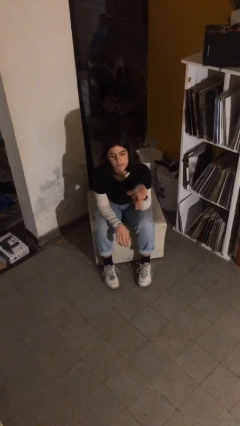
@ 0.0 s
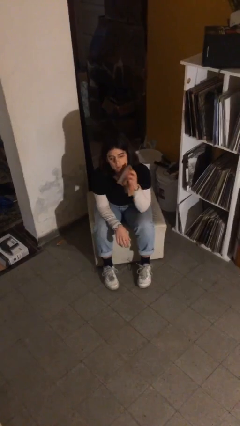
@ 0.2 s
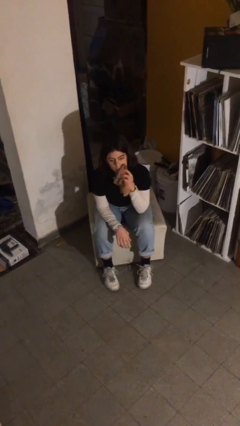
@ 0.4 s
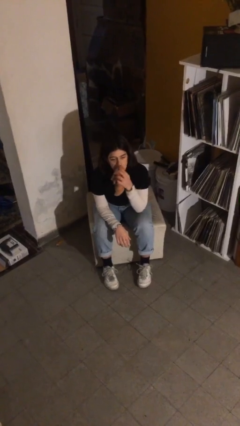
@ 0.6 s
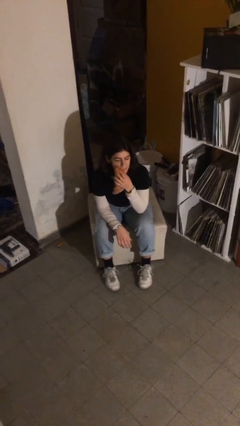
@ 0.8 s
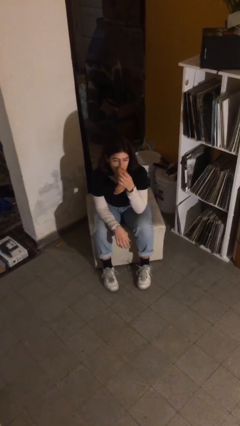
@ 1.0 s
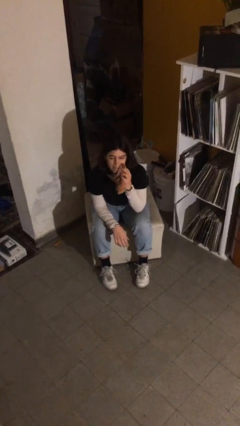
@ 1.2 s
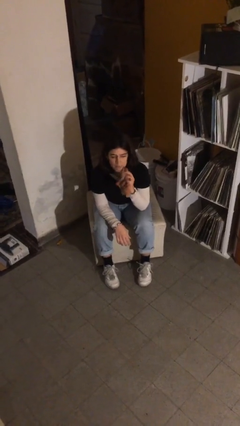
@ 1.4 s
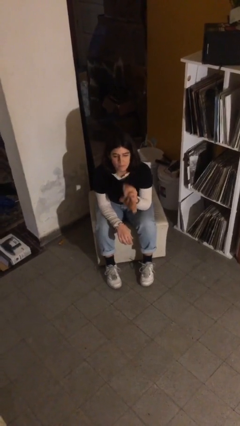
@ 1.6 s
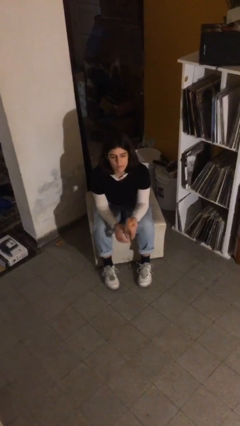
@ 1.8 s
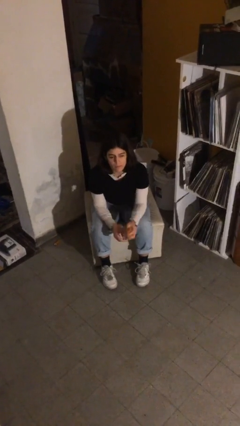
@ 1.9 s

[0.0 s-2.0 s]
person wipes mouth with napkin

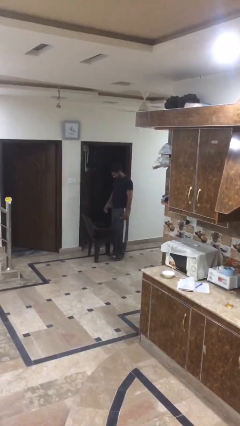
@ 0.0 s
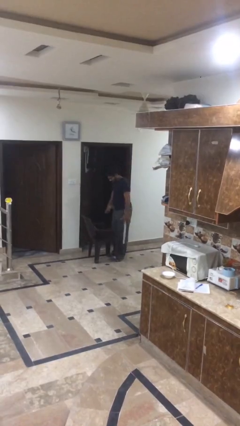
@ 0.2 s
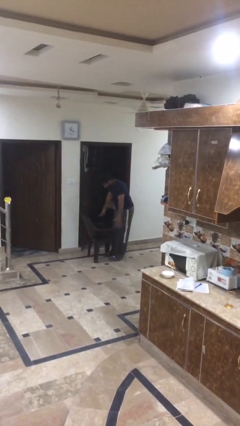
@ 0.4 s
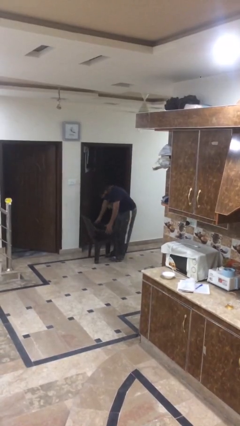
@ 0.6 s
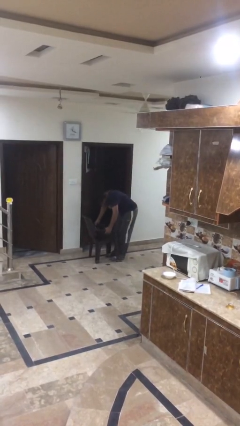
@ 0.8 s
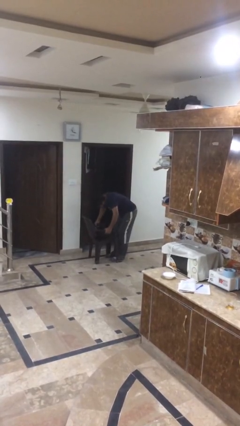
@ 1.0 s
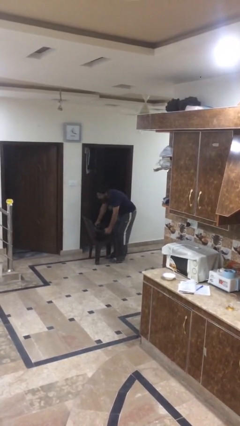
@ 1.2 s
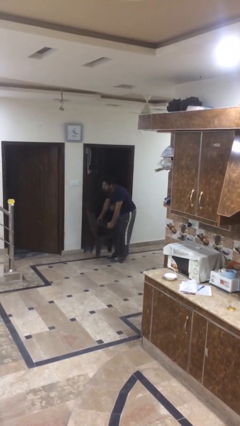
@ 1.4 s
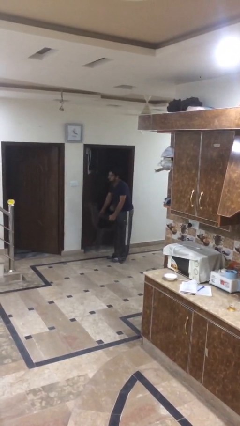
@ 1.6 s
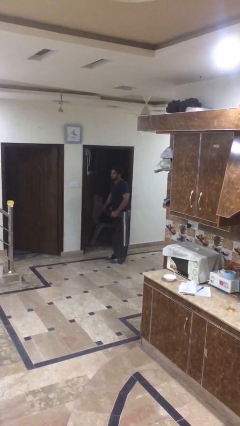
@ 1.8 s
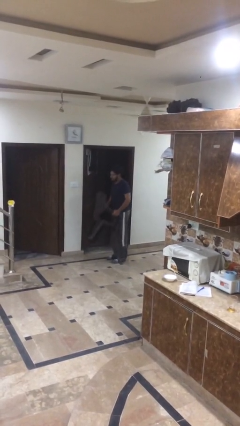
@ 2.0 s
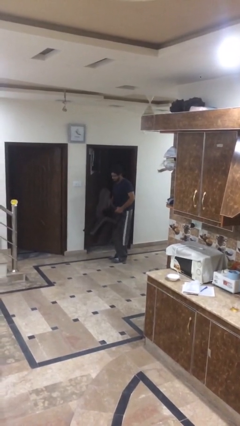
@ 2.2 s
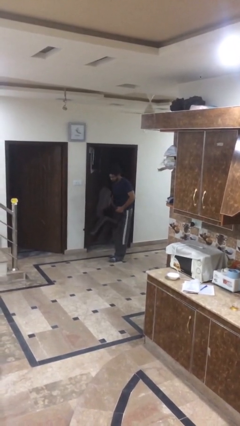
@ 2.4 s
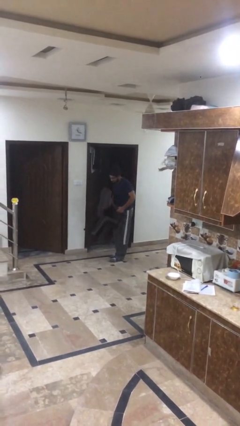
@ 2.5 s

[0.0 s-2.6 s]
person picks up object from floor

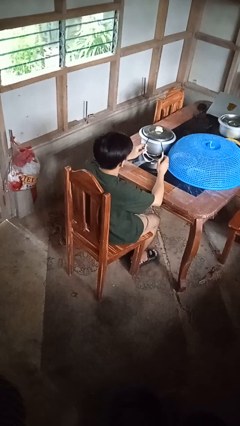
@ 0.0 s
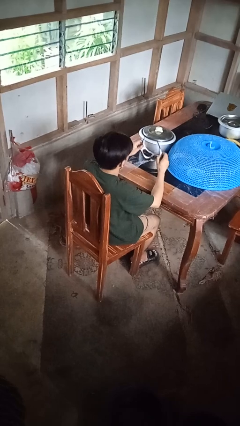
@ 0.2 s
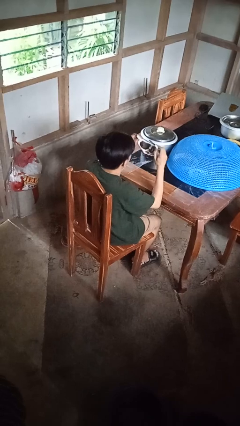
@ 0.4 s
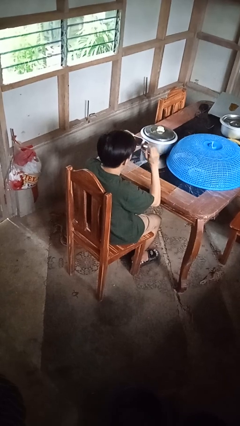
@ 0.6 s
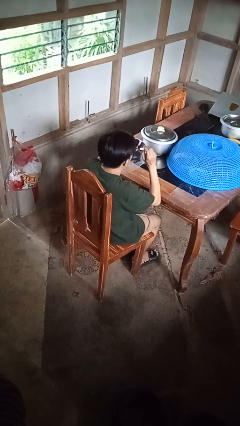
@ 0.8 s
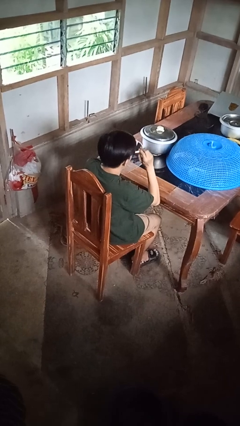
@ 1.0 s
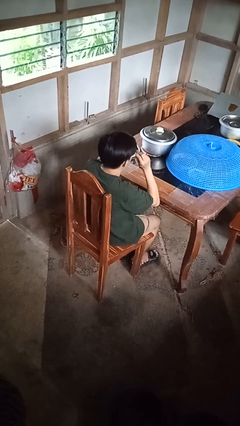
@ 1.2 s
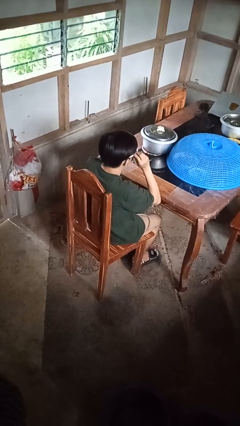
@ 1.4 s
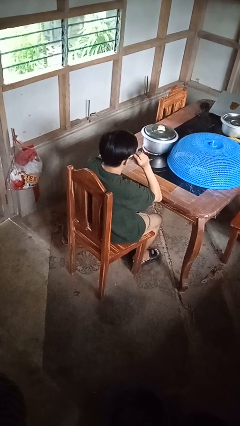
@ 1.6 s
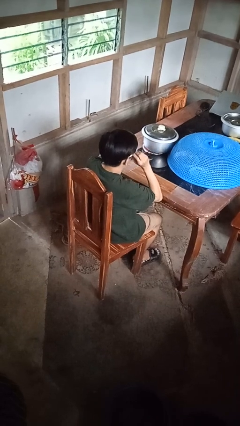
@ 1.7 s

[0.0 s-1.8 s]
person puts on sunglasses

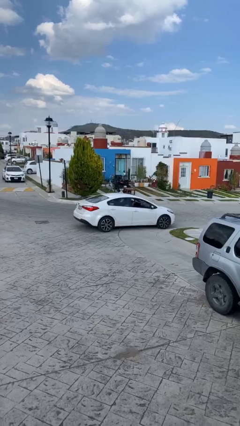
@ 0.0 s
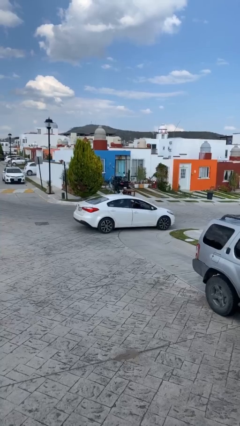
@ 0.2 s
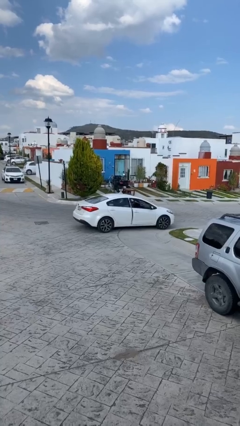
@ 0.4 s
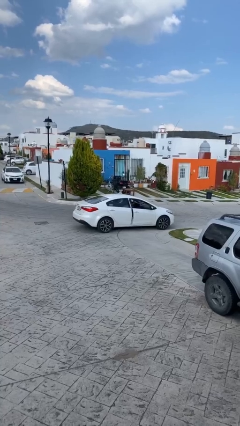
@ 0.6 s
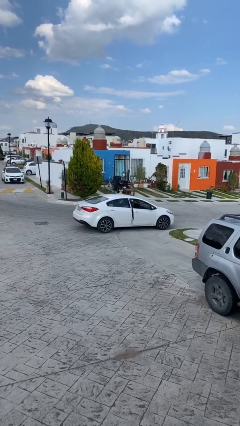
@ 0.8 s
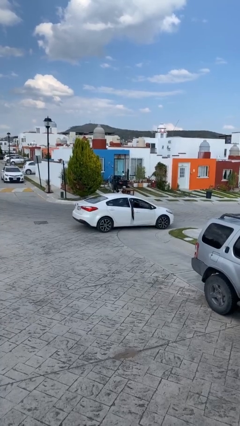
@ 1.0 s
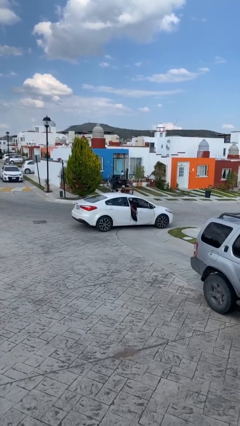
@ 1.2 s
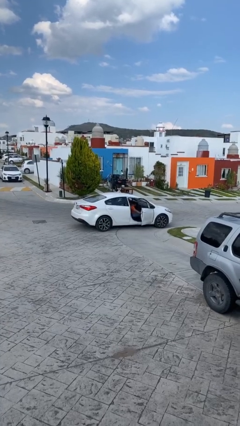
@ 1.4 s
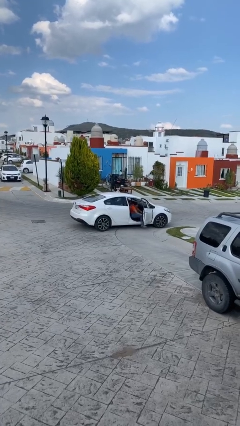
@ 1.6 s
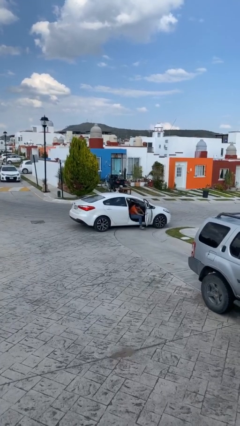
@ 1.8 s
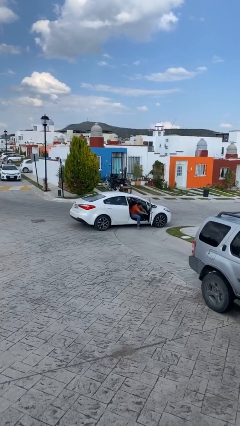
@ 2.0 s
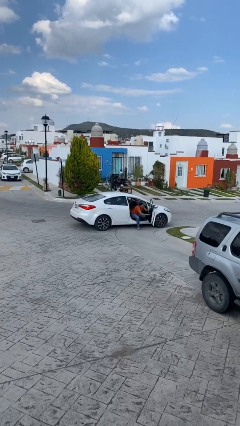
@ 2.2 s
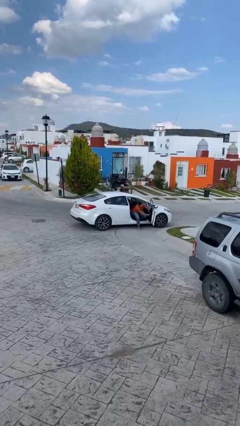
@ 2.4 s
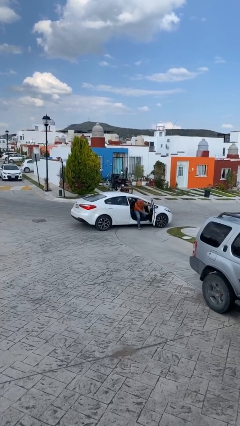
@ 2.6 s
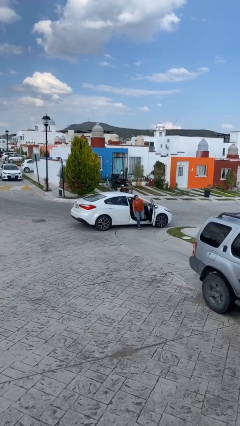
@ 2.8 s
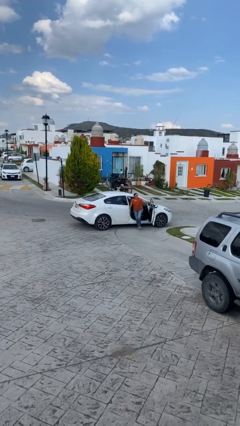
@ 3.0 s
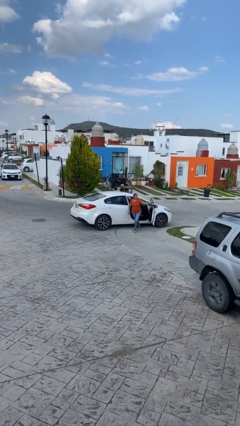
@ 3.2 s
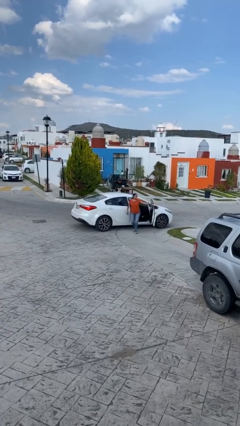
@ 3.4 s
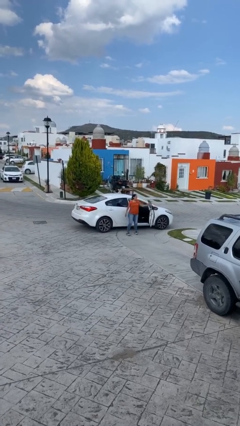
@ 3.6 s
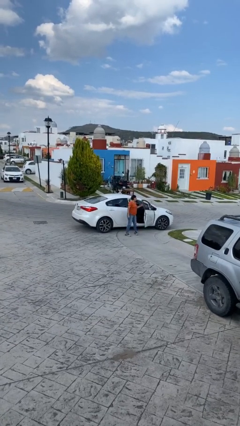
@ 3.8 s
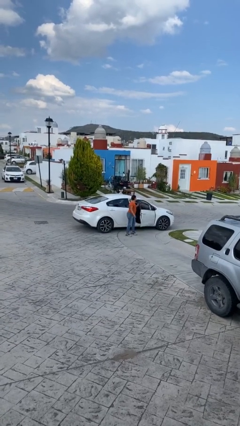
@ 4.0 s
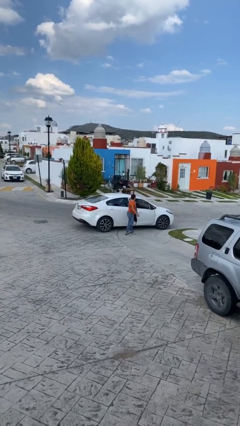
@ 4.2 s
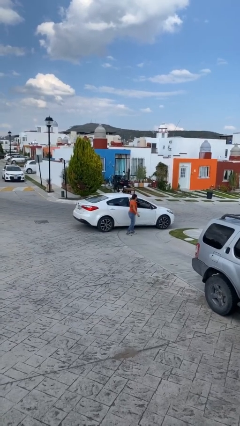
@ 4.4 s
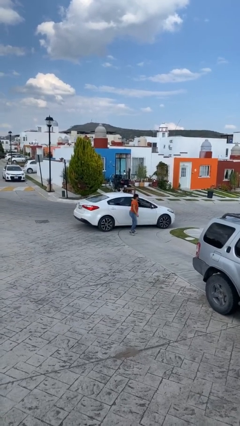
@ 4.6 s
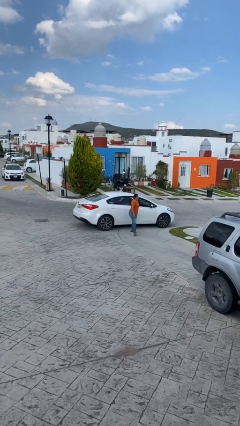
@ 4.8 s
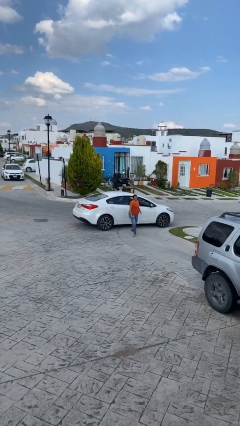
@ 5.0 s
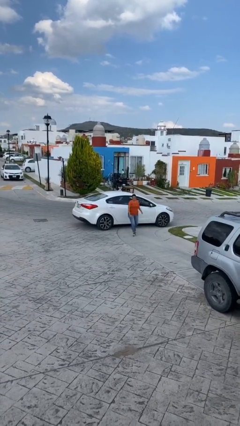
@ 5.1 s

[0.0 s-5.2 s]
car drops off person

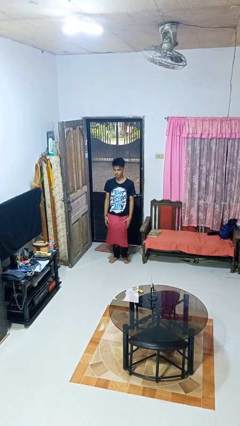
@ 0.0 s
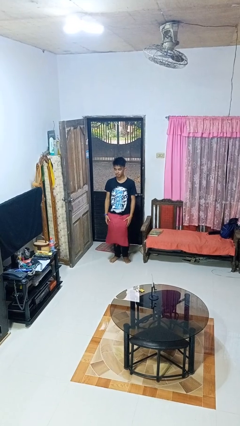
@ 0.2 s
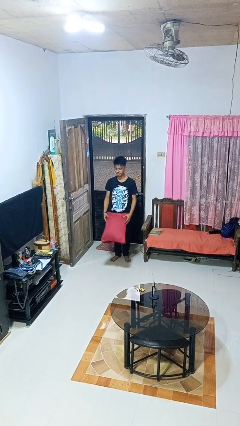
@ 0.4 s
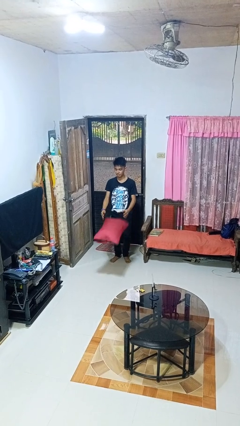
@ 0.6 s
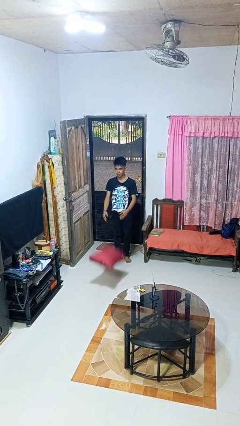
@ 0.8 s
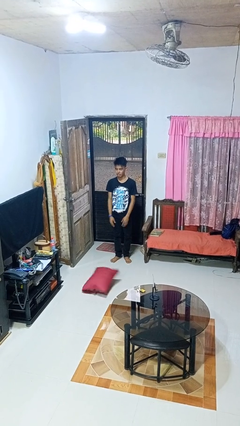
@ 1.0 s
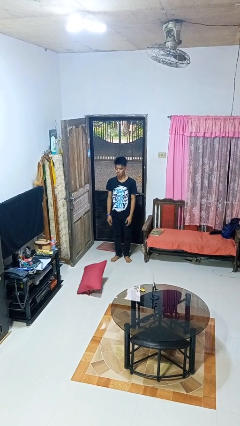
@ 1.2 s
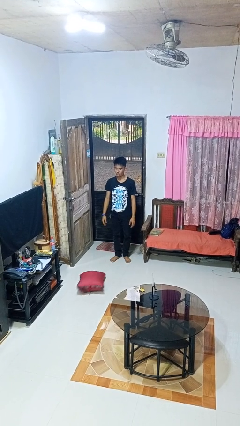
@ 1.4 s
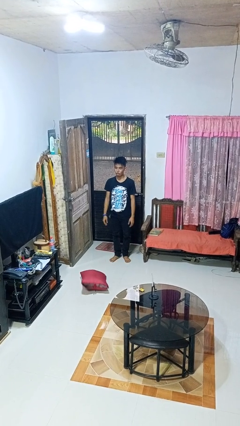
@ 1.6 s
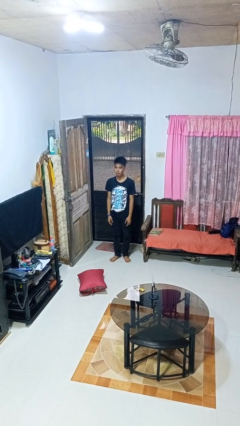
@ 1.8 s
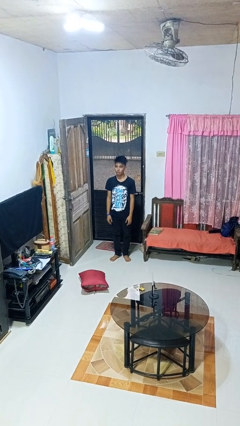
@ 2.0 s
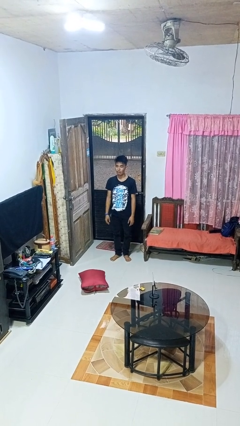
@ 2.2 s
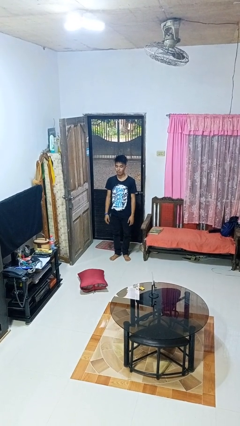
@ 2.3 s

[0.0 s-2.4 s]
person throws object to ground

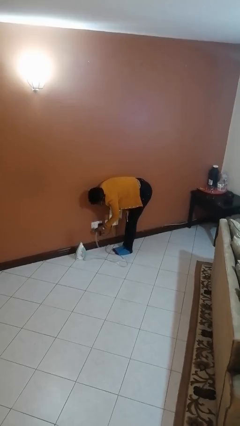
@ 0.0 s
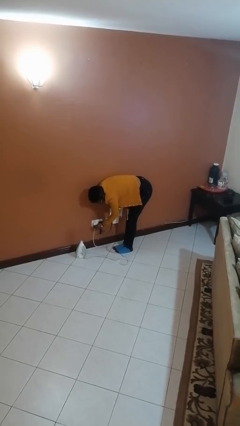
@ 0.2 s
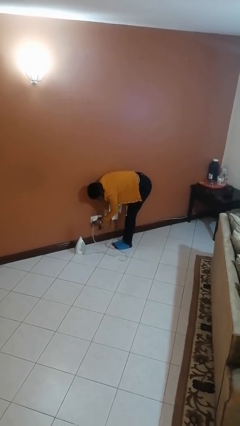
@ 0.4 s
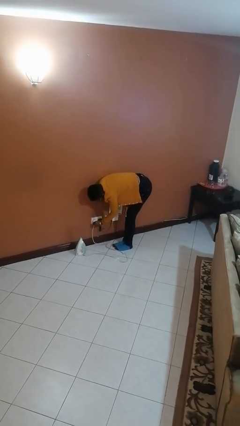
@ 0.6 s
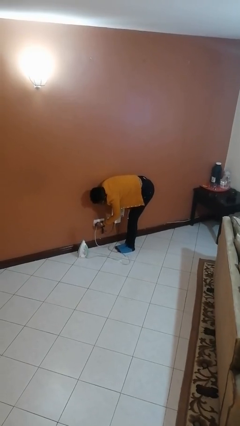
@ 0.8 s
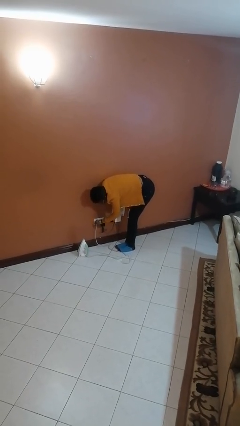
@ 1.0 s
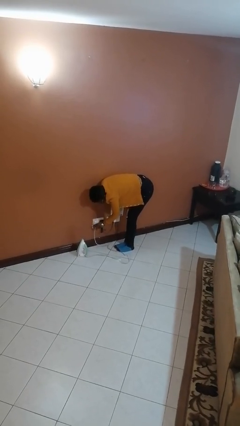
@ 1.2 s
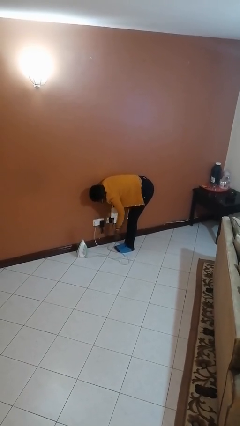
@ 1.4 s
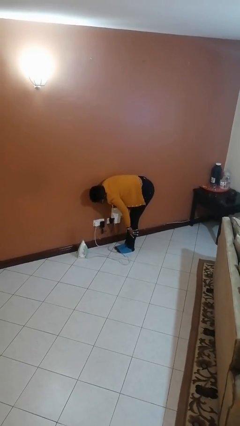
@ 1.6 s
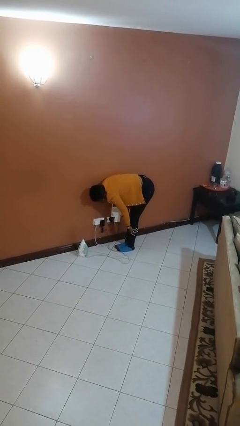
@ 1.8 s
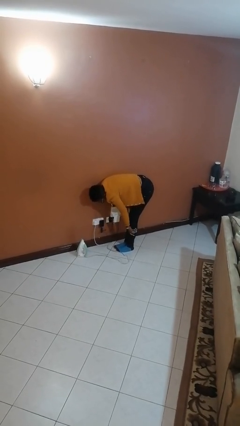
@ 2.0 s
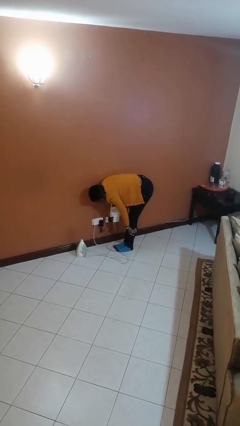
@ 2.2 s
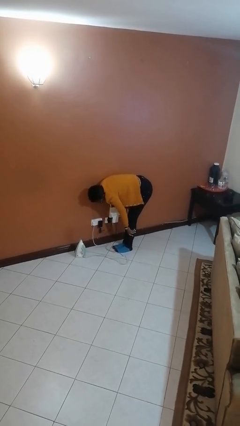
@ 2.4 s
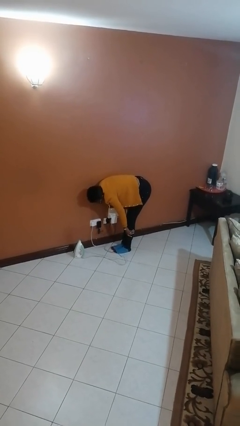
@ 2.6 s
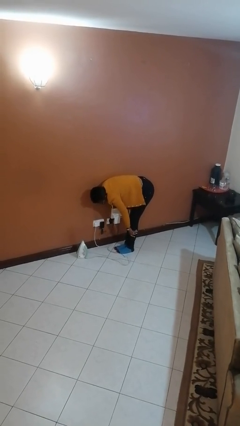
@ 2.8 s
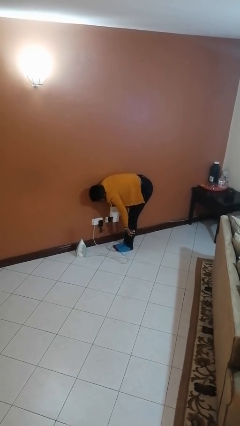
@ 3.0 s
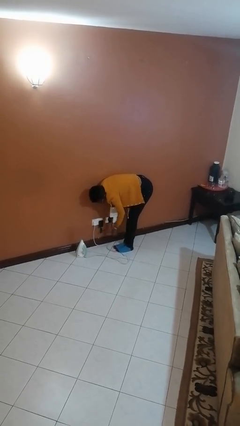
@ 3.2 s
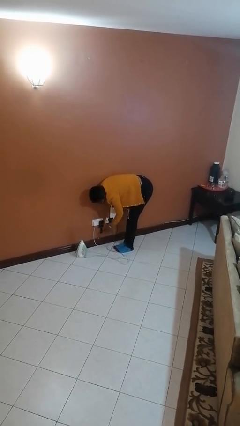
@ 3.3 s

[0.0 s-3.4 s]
person plugs into electrical socket
